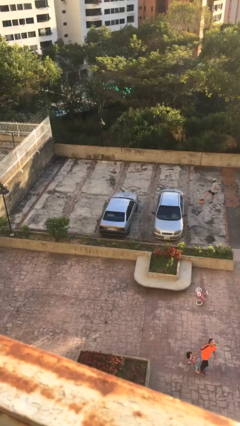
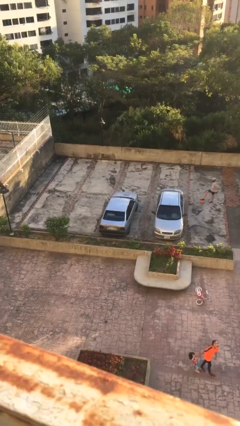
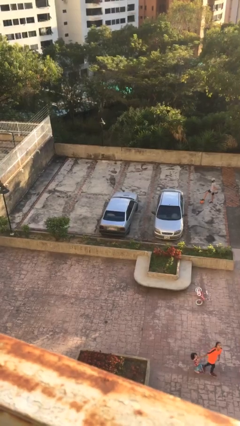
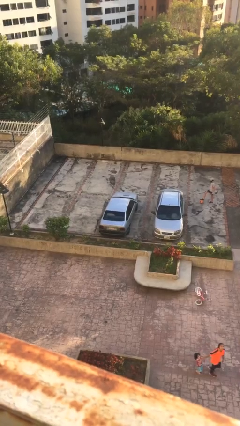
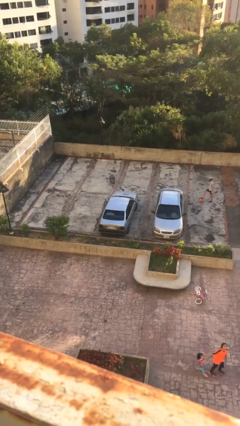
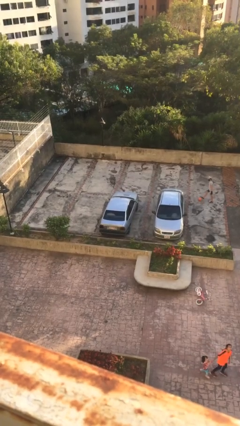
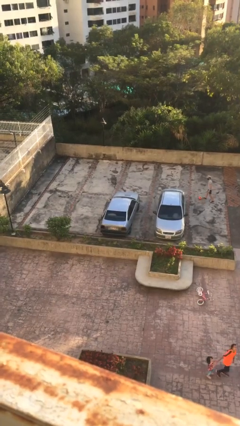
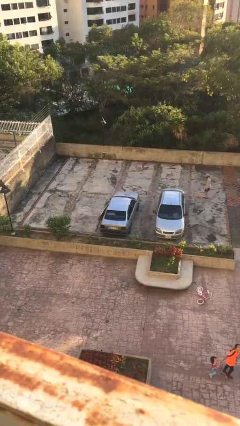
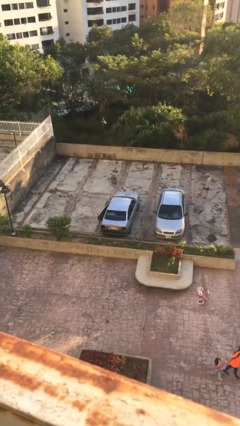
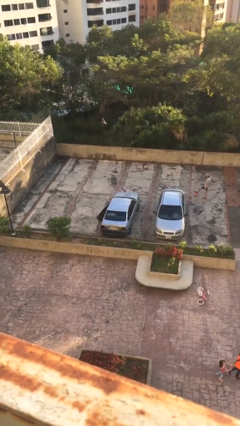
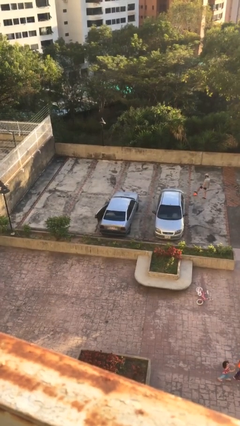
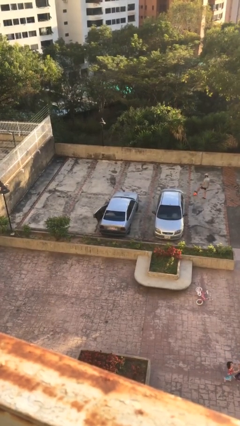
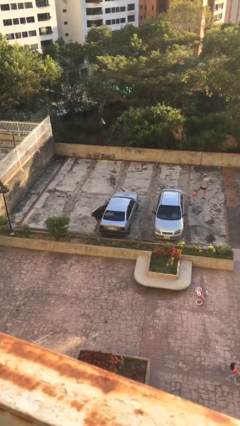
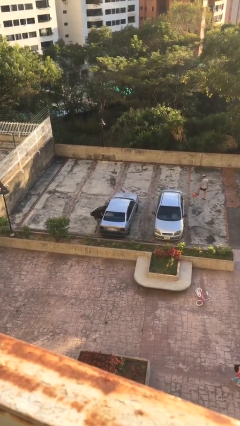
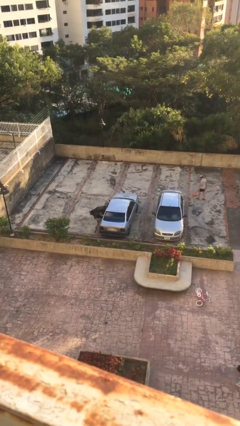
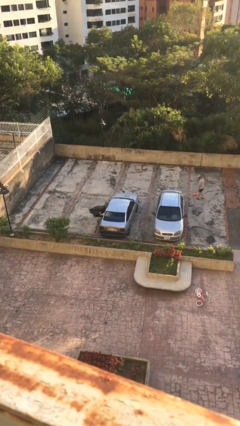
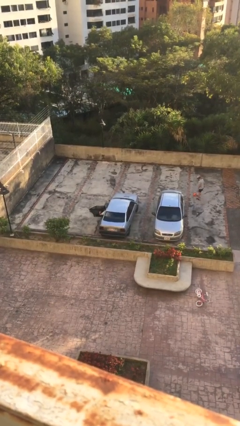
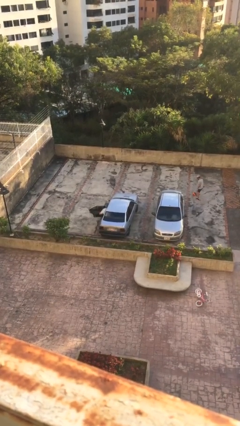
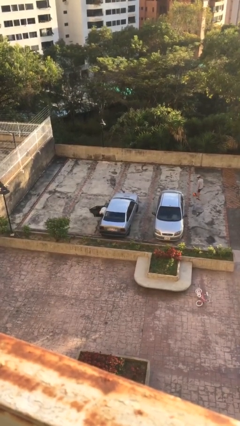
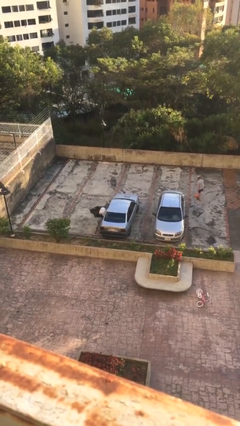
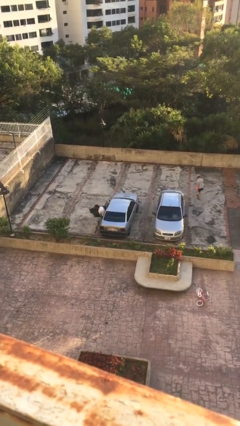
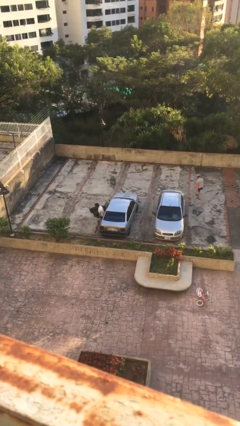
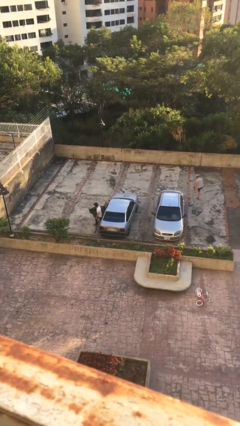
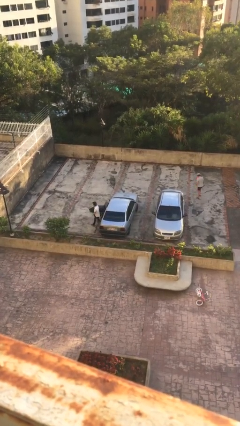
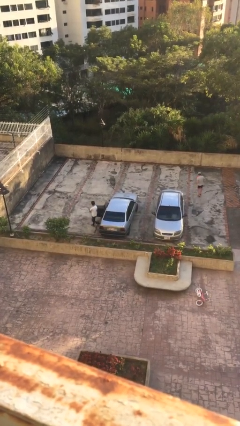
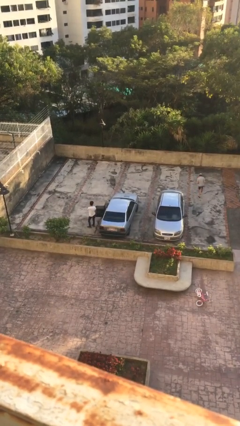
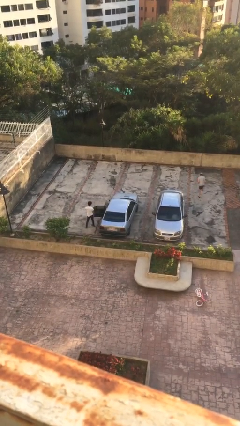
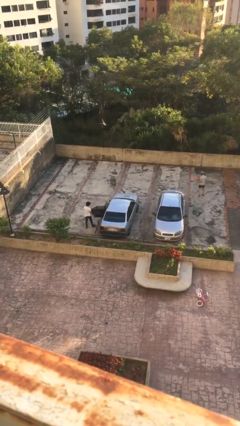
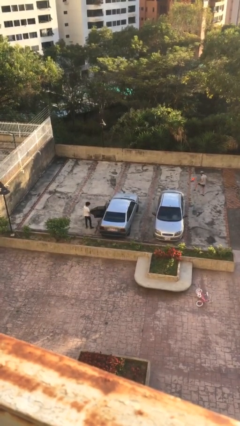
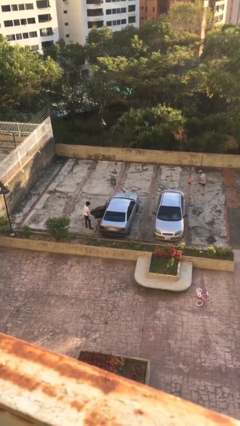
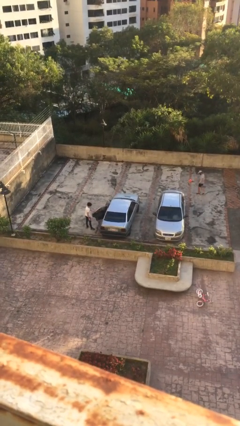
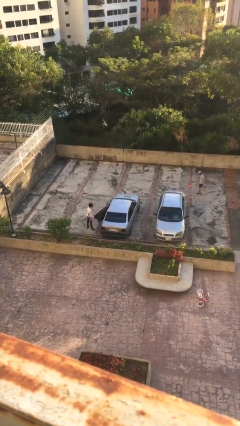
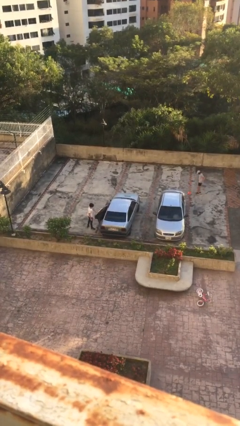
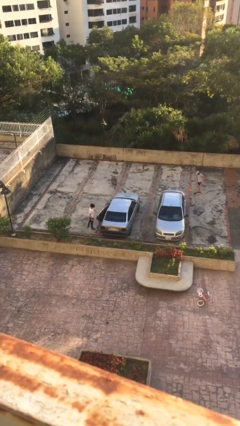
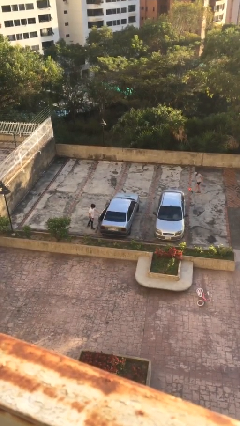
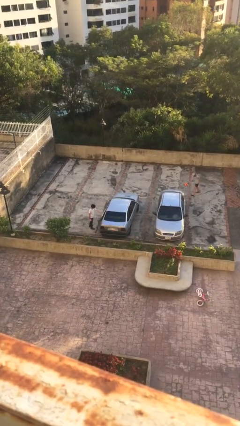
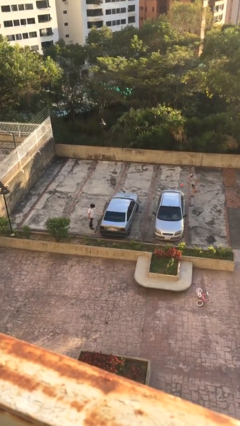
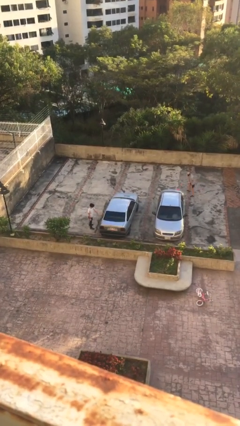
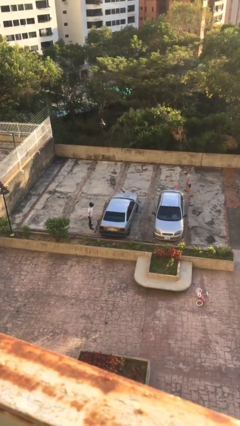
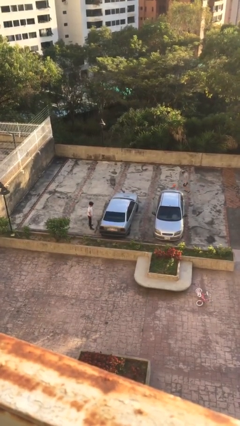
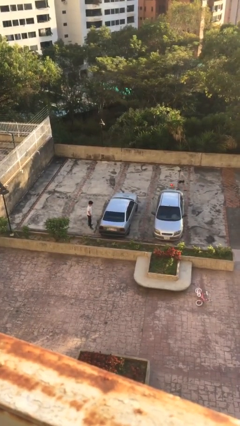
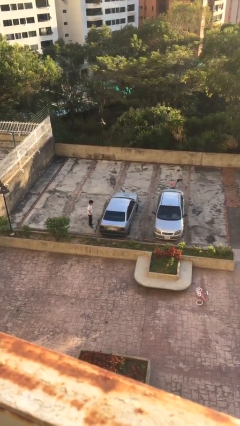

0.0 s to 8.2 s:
car drops off person

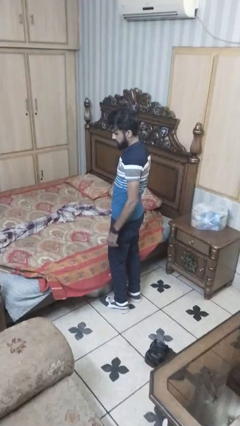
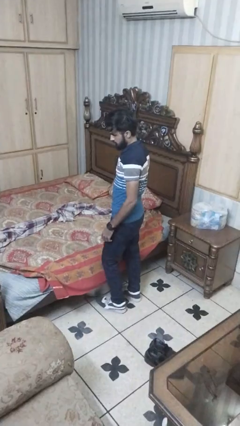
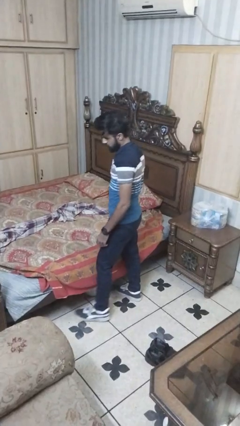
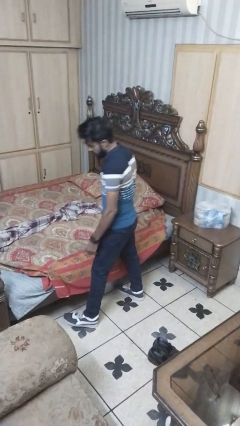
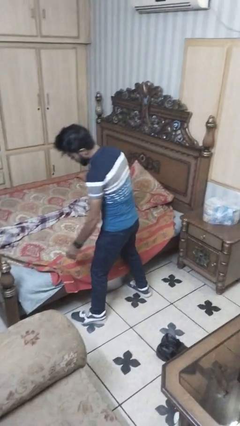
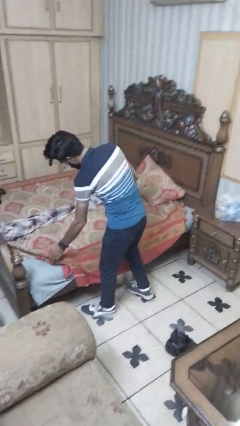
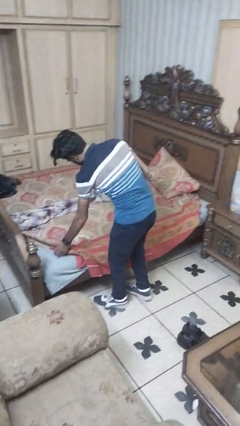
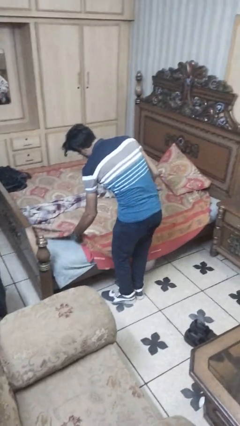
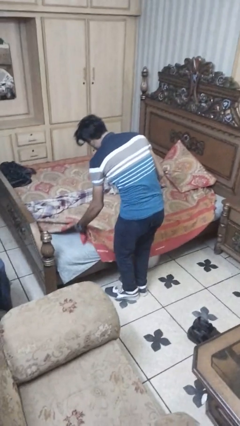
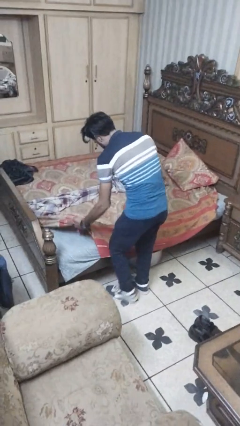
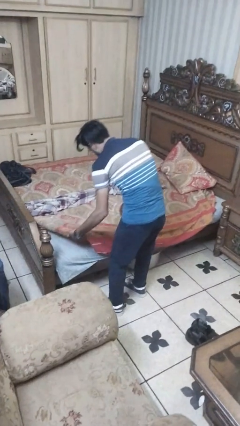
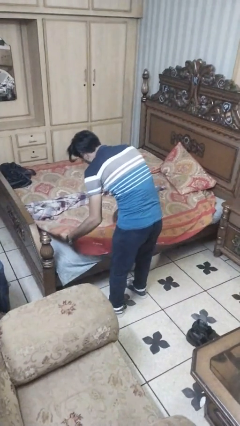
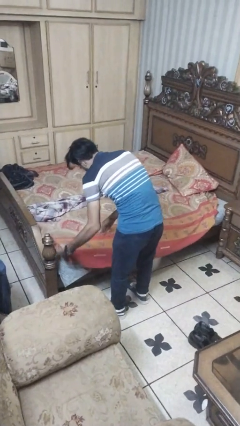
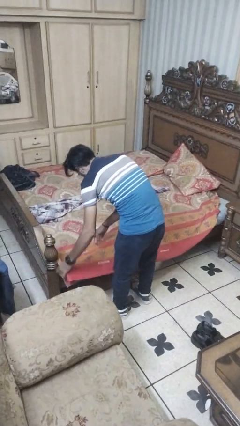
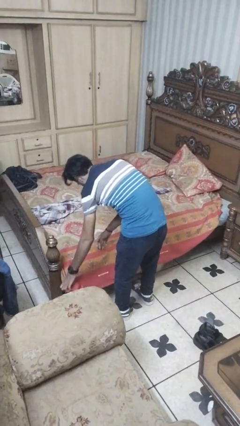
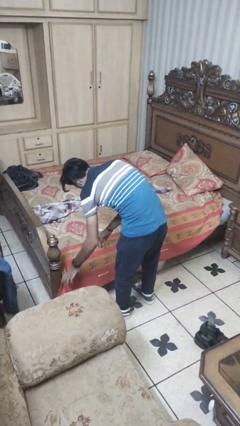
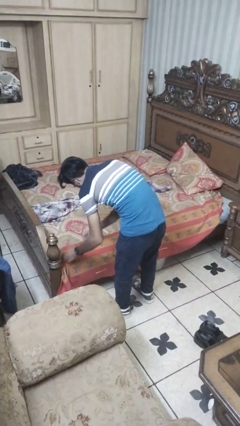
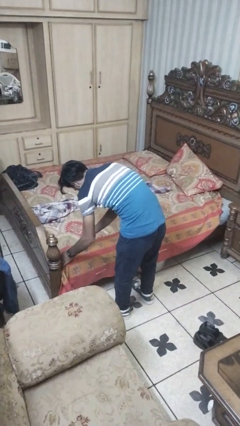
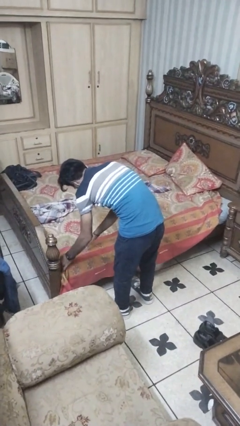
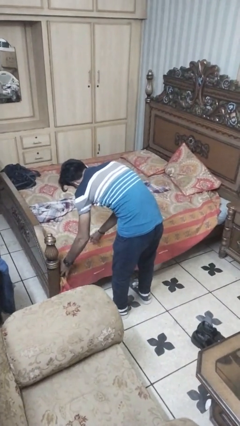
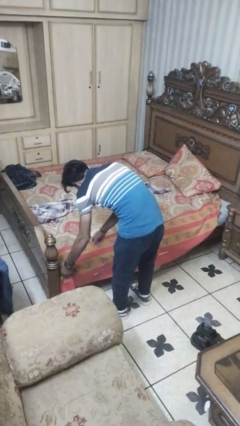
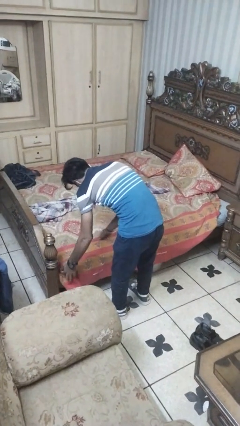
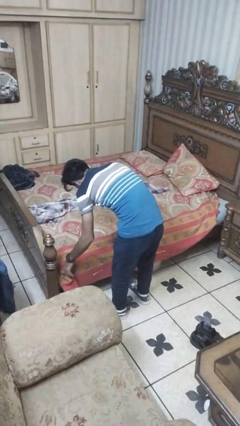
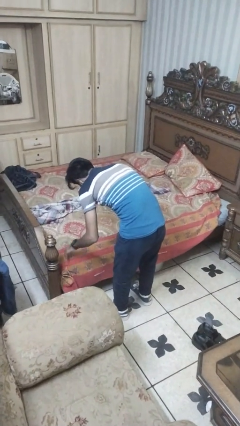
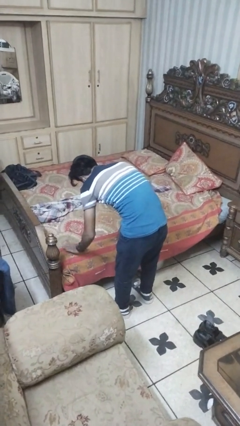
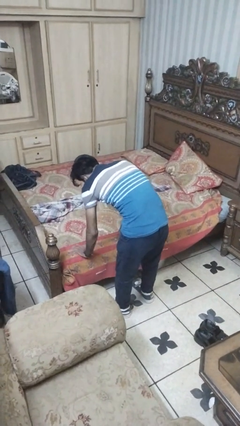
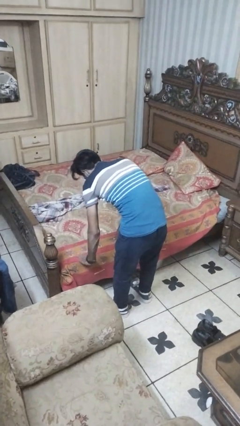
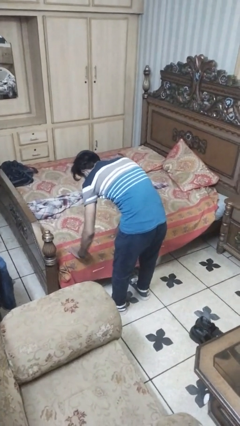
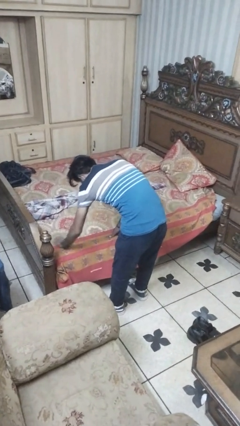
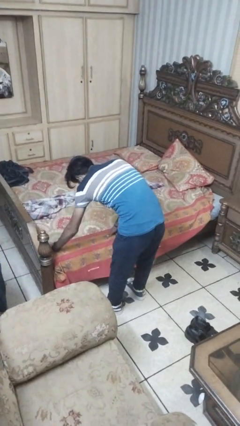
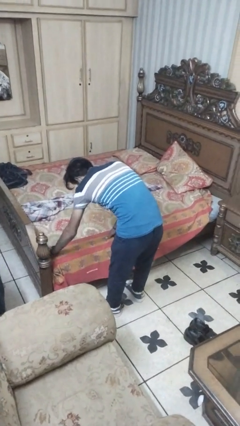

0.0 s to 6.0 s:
person makes bed

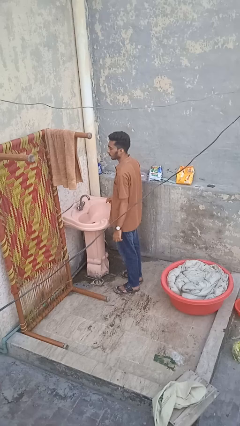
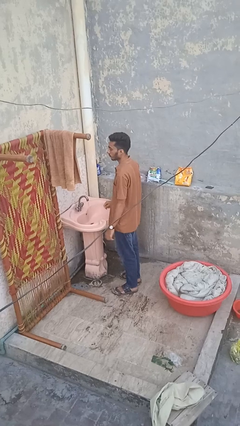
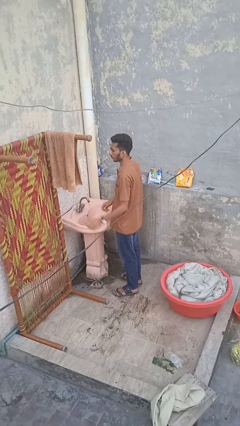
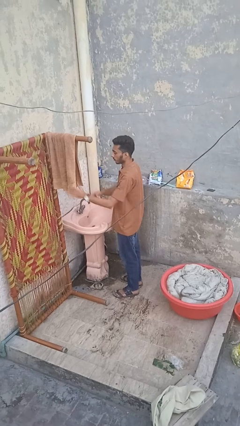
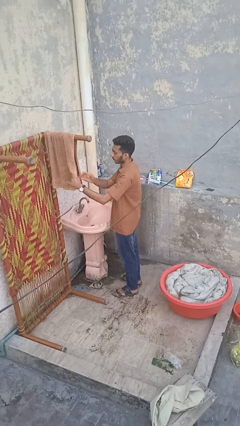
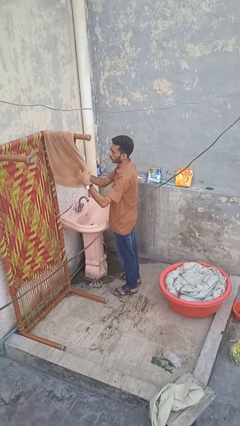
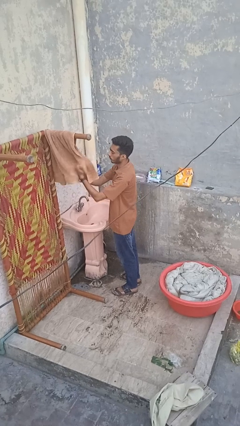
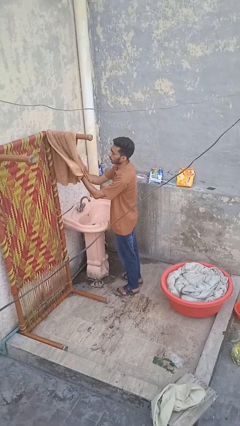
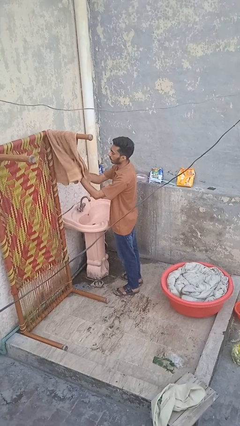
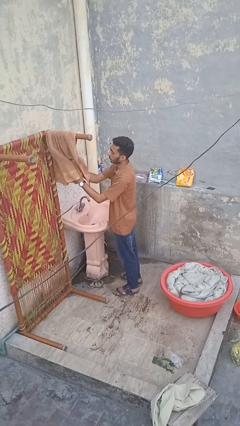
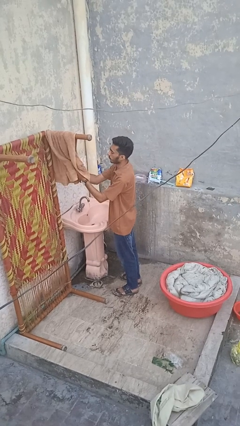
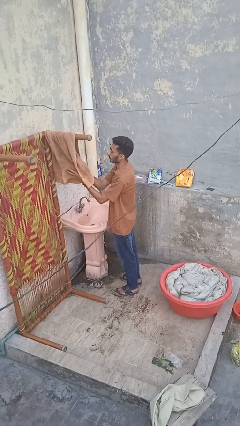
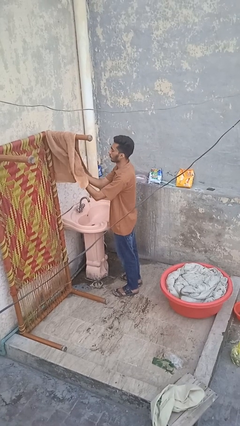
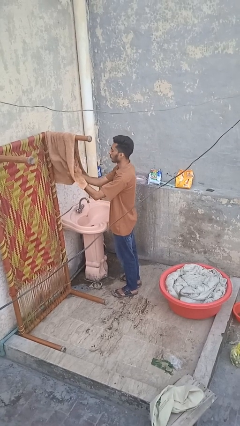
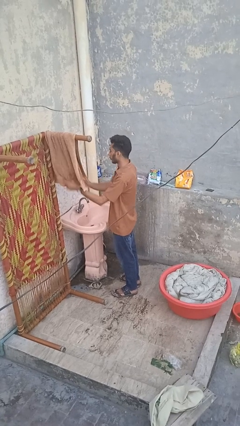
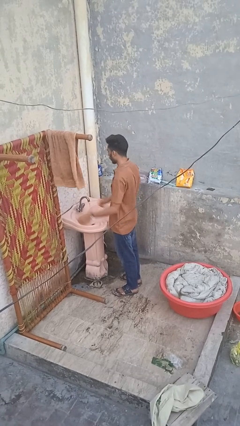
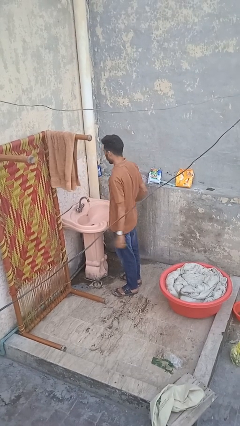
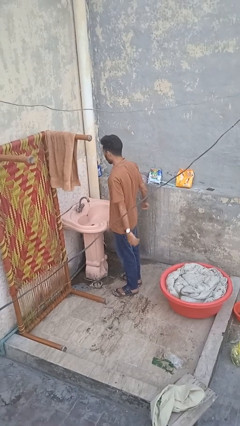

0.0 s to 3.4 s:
person dries hands with towel

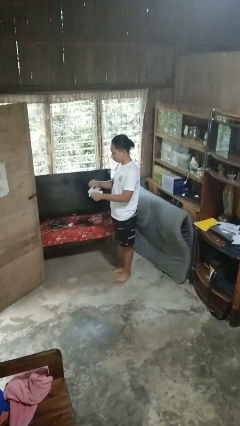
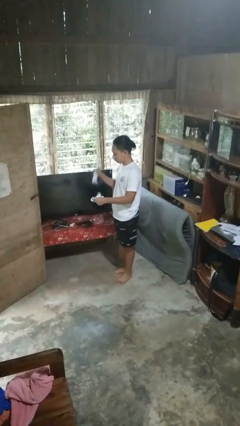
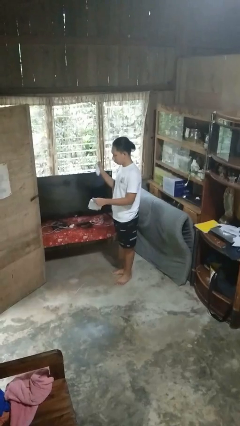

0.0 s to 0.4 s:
person tears paper
